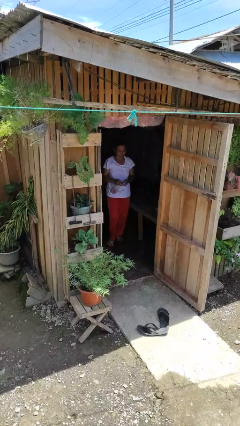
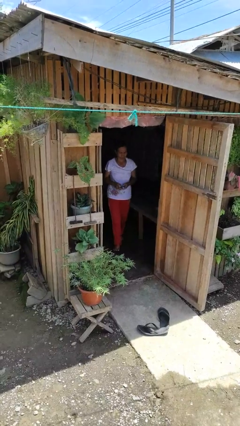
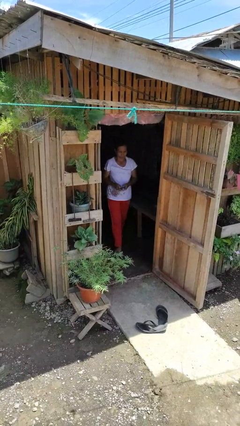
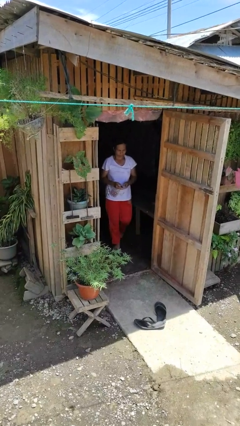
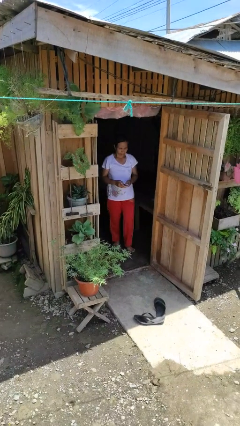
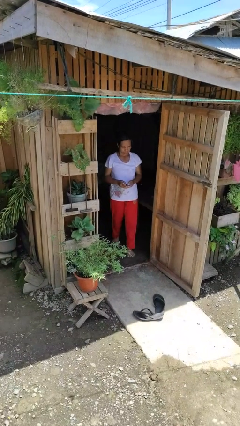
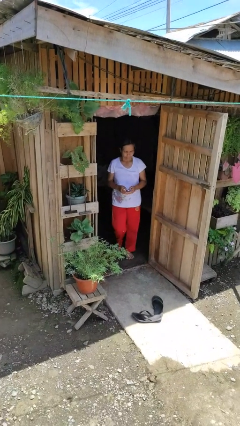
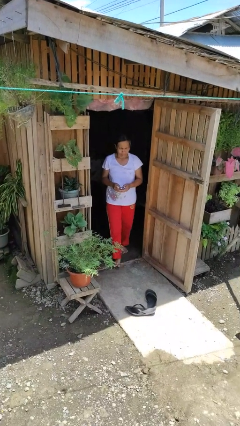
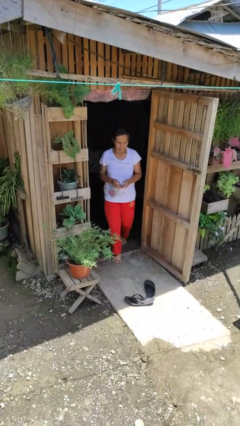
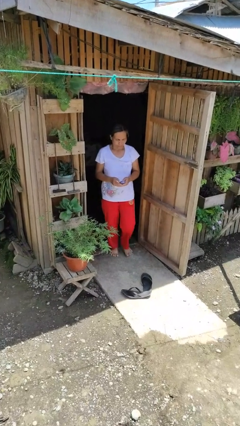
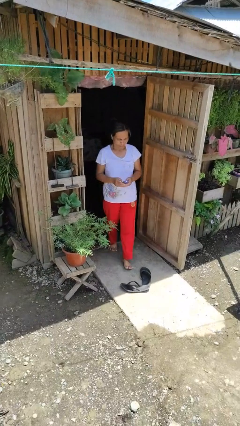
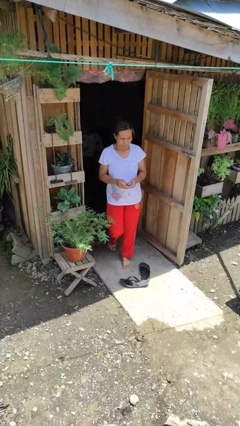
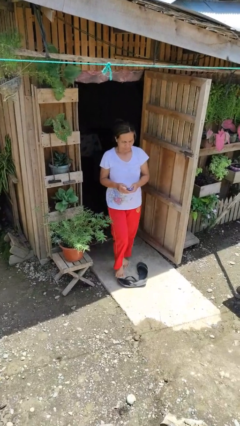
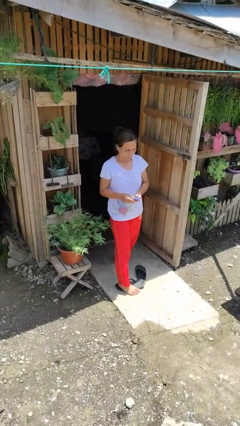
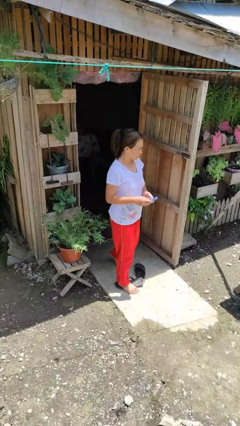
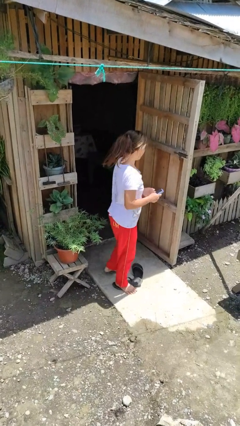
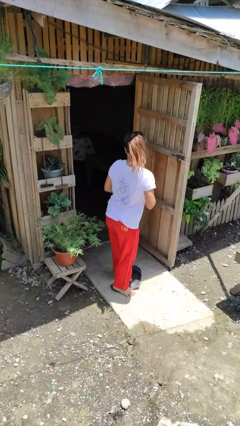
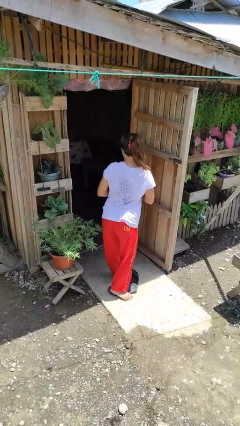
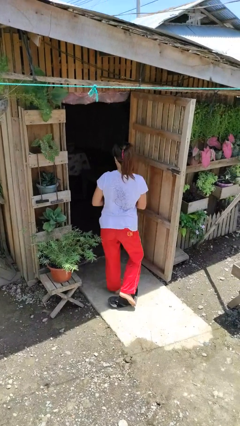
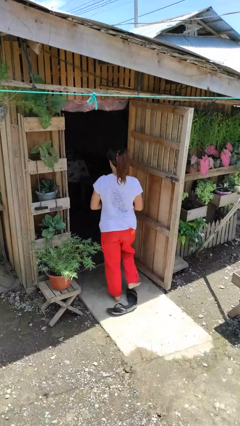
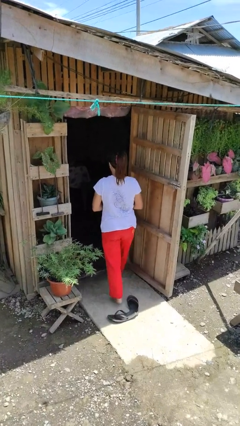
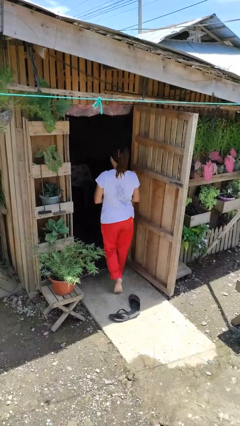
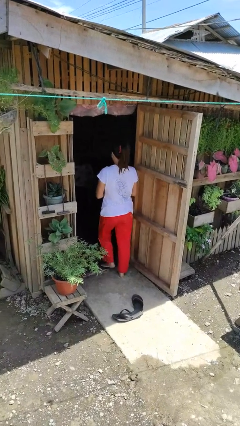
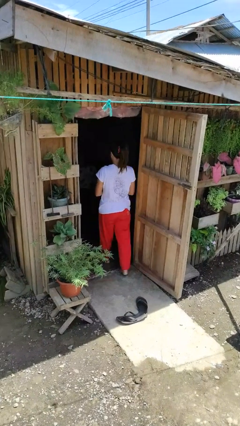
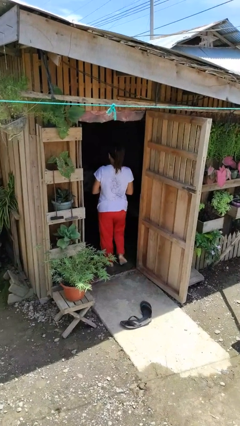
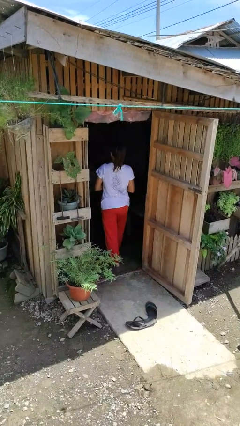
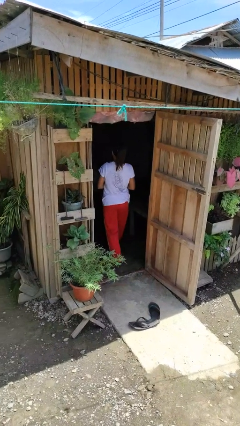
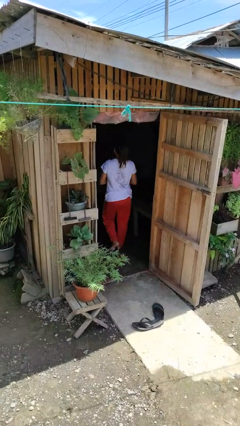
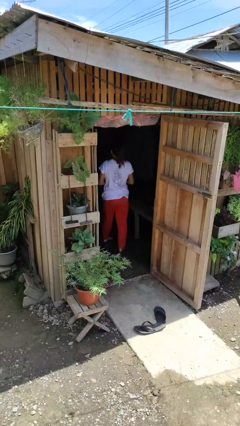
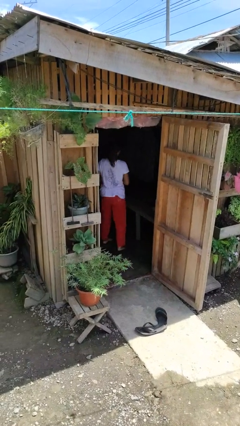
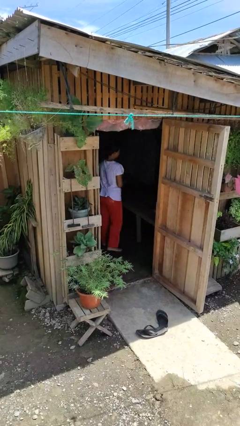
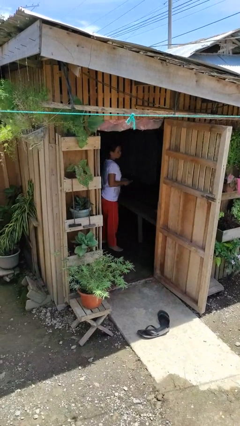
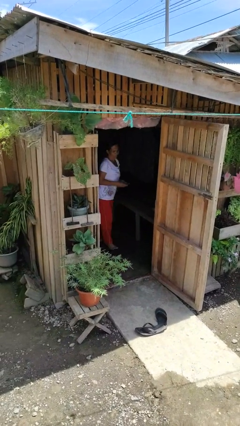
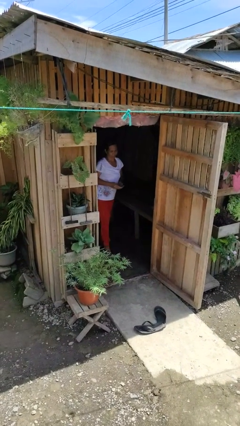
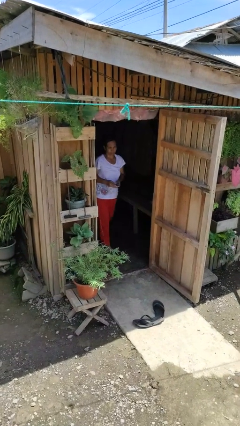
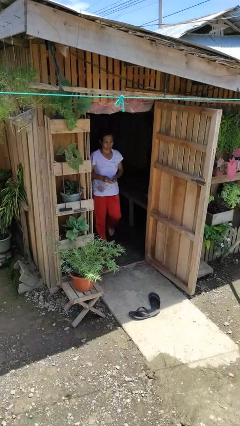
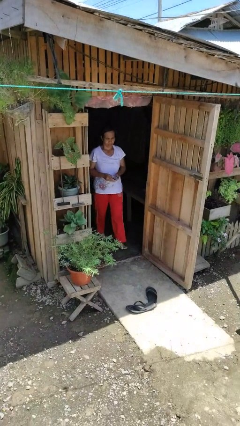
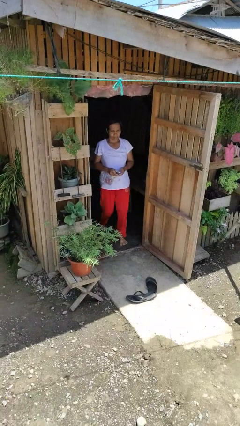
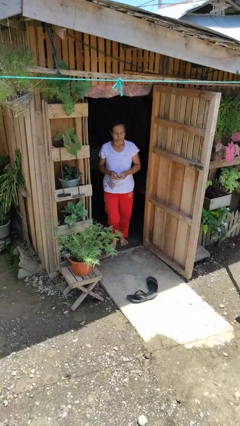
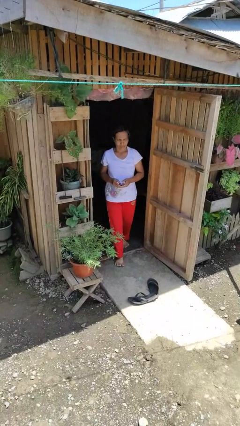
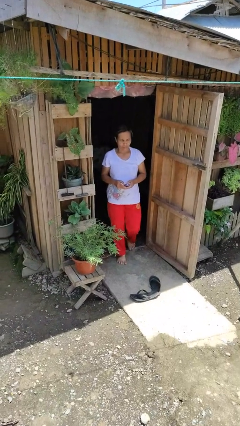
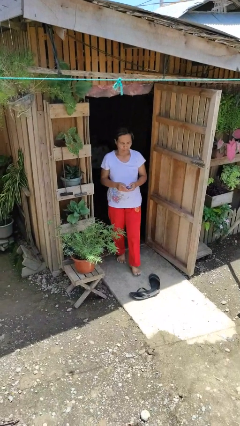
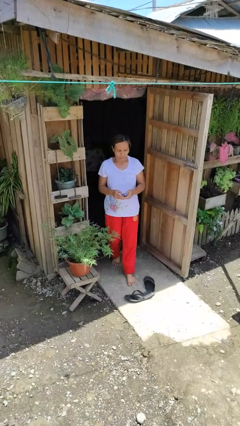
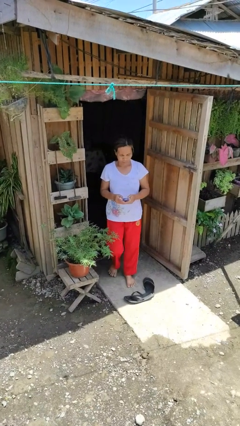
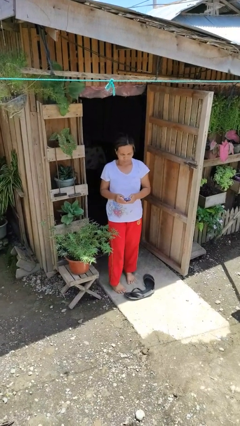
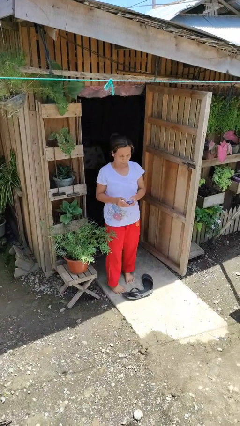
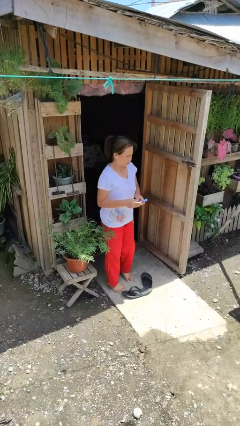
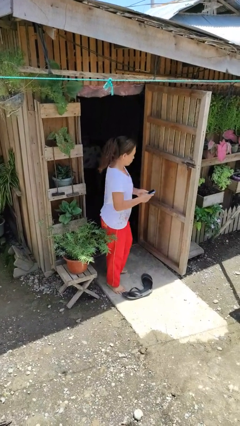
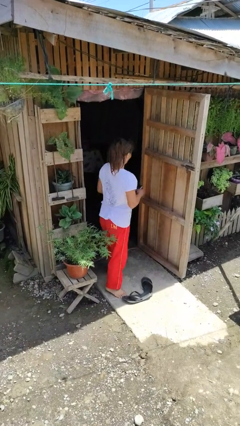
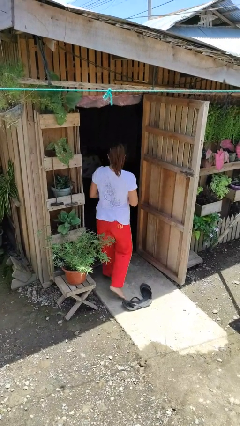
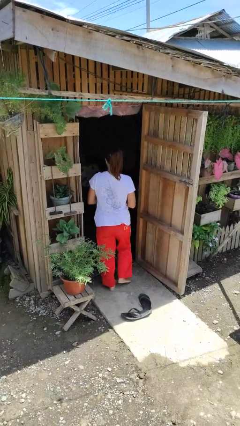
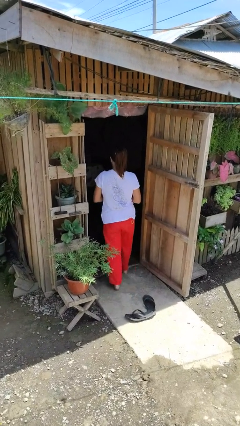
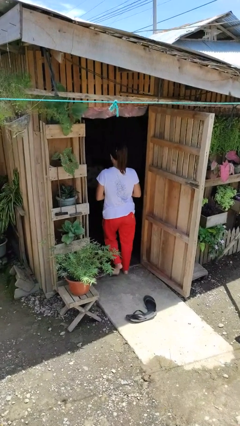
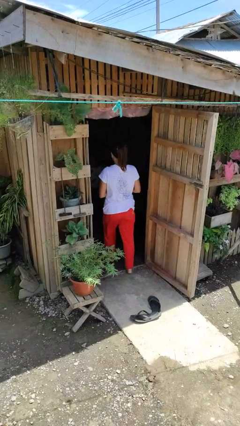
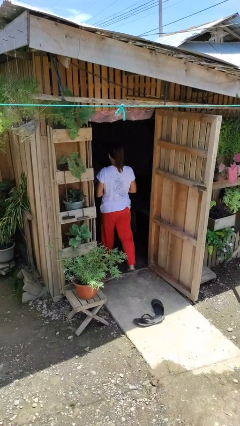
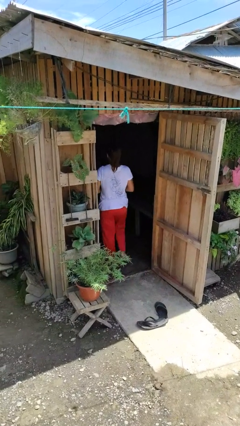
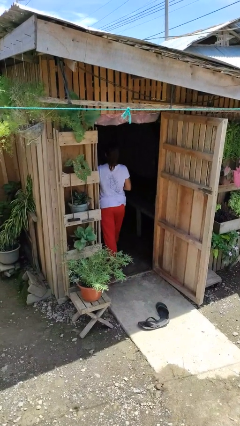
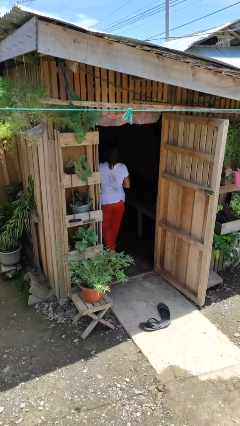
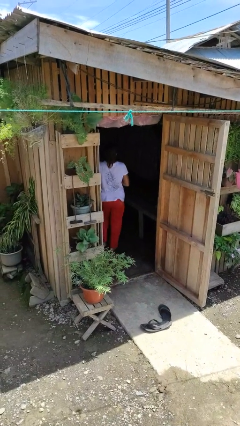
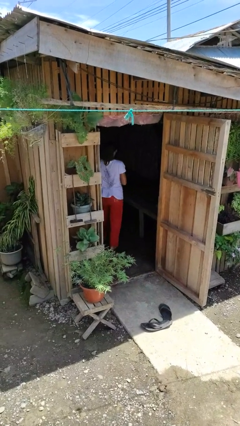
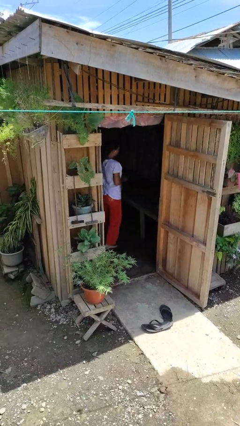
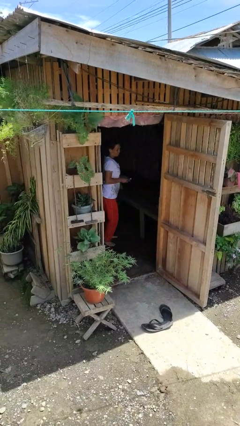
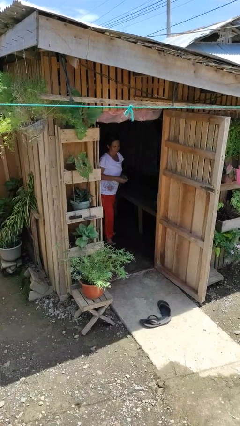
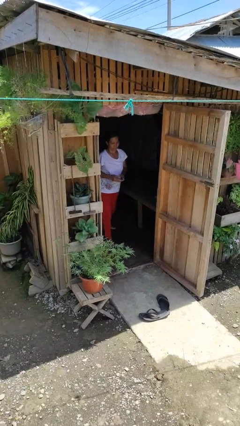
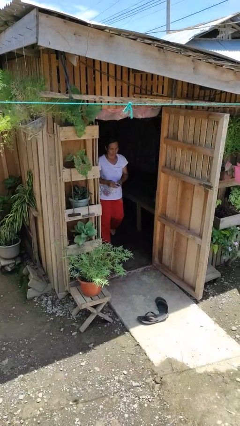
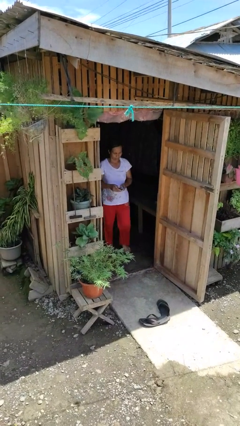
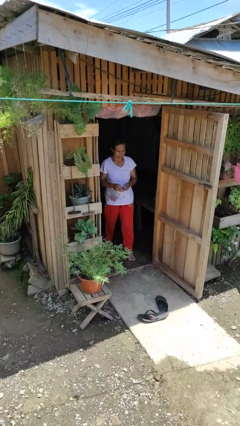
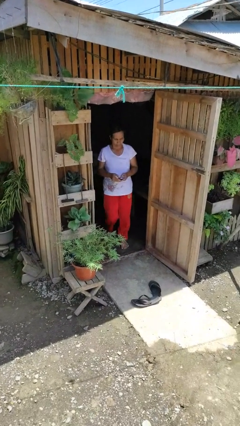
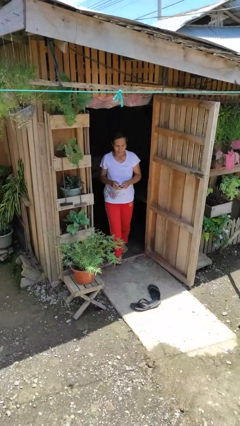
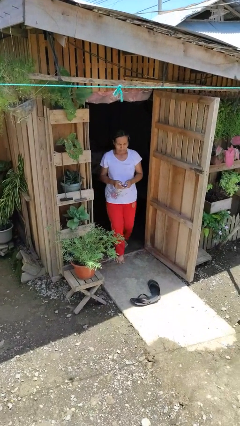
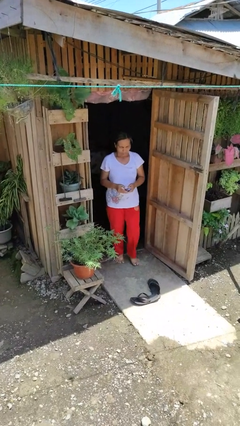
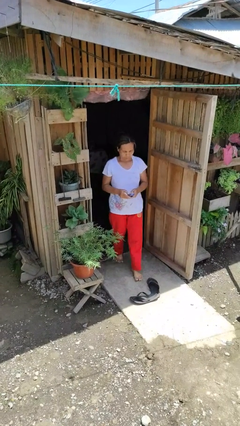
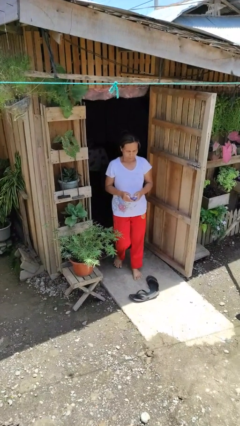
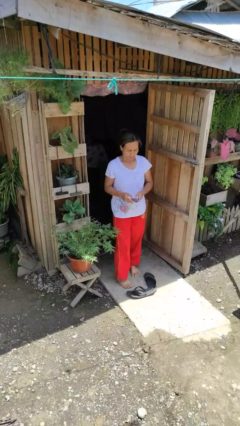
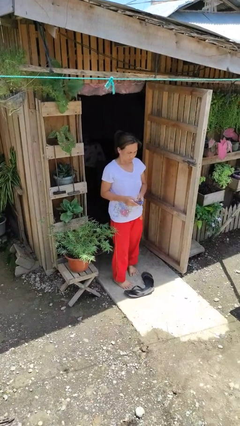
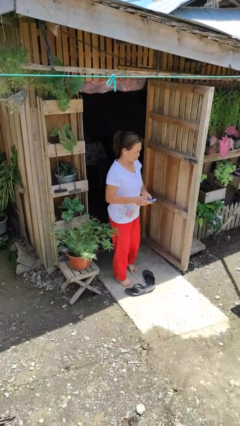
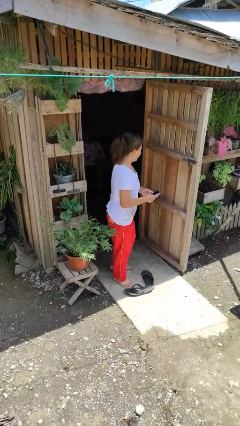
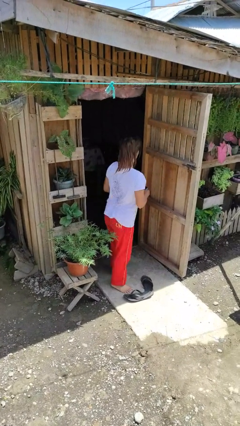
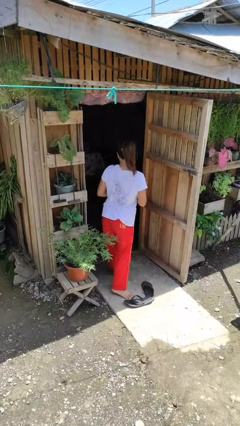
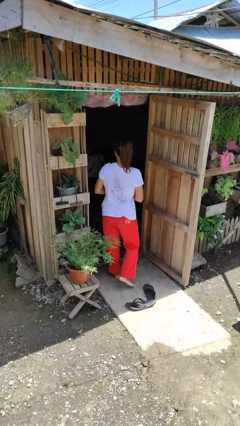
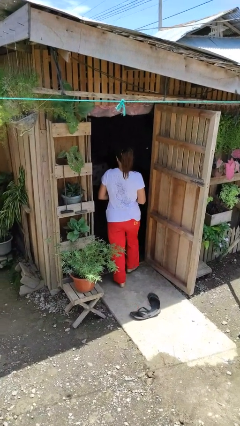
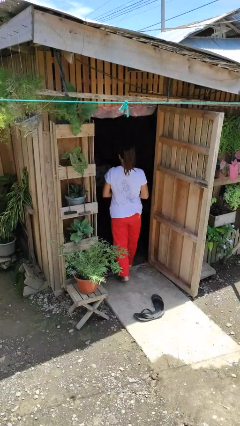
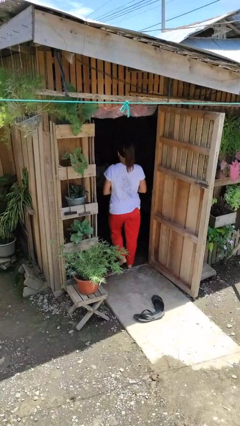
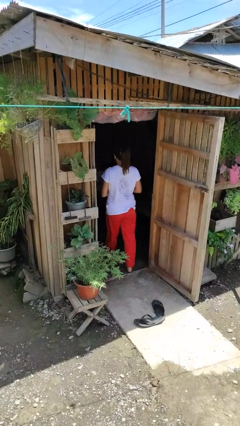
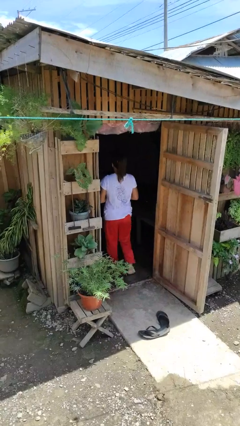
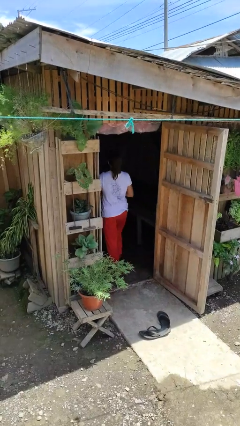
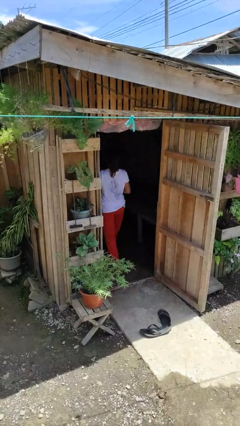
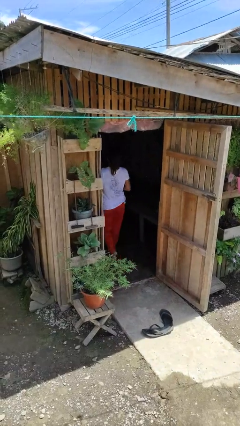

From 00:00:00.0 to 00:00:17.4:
person texts on phone

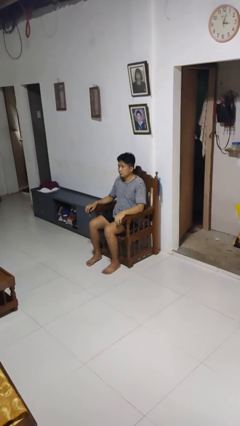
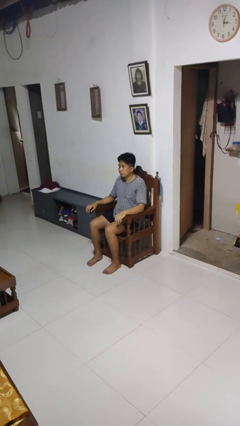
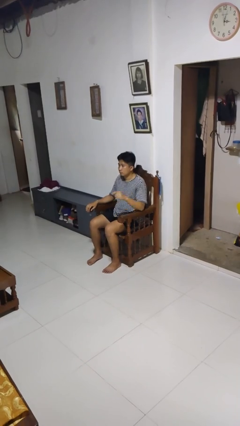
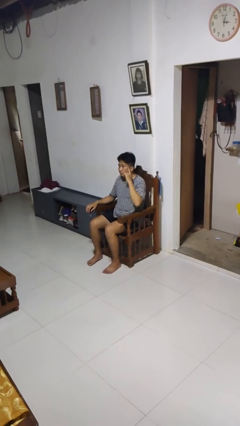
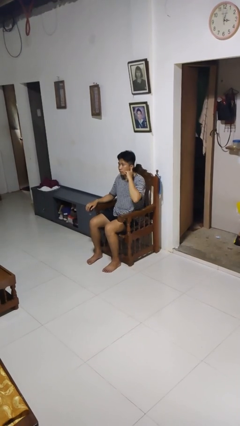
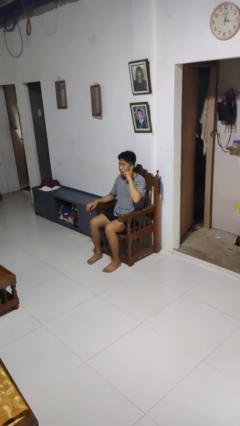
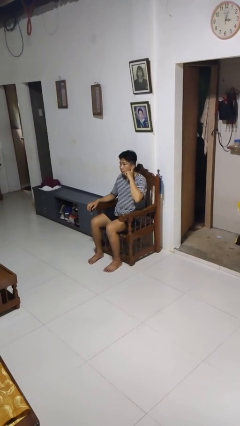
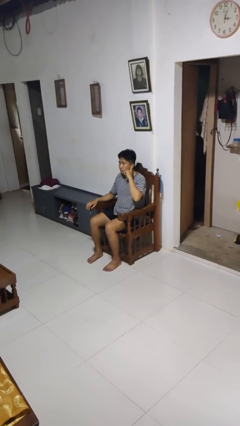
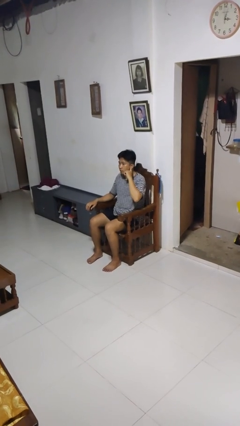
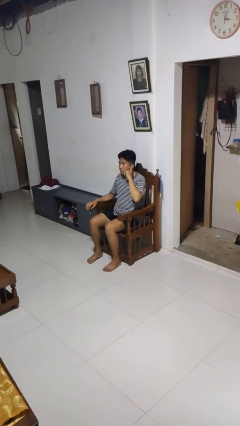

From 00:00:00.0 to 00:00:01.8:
person gestures listen closely
